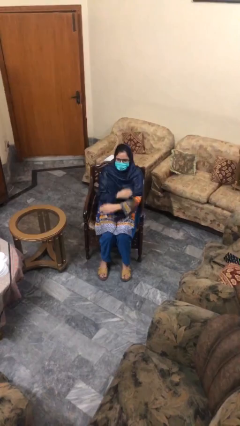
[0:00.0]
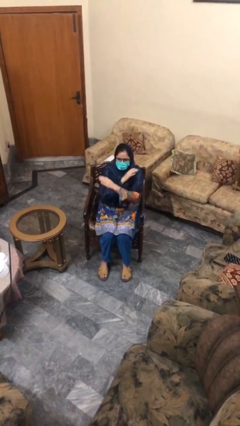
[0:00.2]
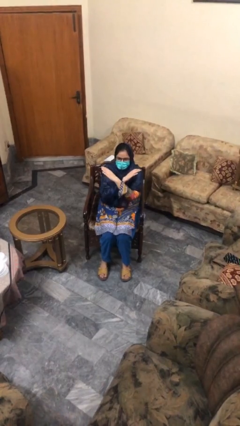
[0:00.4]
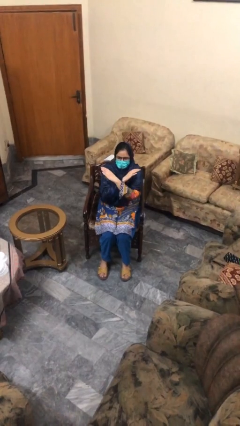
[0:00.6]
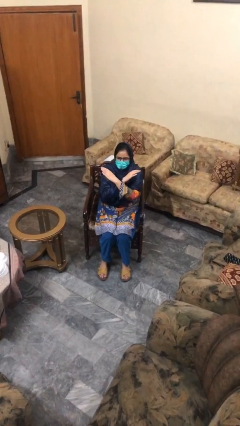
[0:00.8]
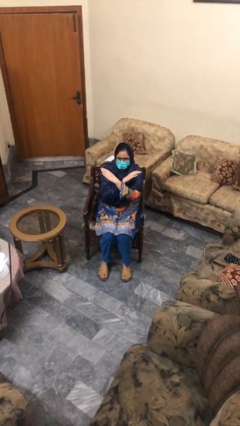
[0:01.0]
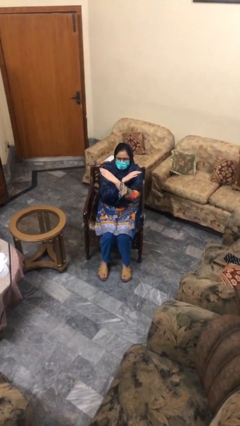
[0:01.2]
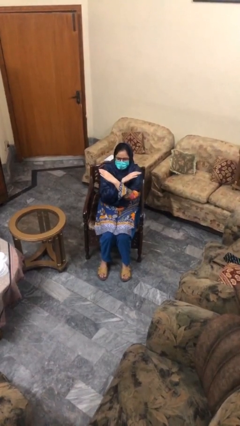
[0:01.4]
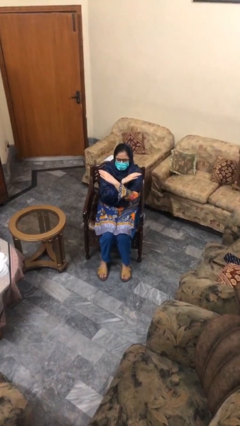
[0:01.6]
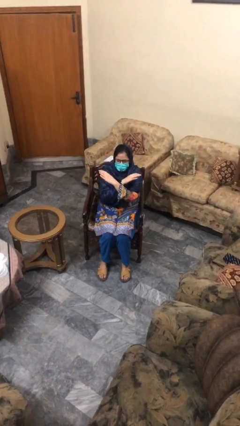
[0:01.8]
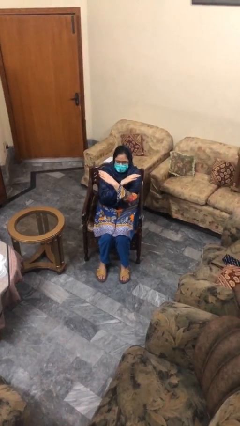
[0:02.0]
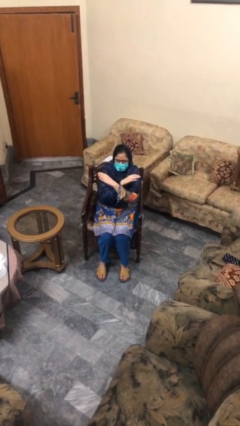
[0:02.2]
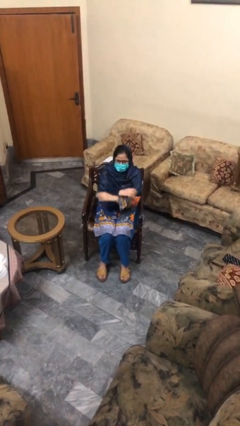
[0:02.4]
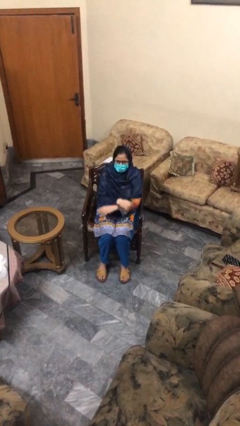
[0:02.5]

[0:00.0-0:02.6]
person gestures arms x

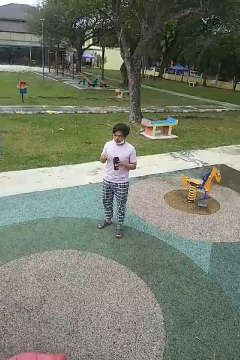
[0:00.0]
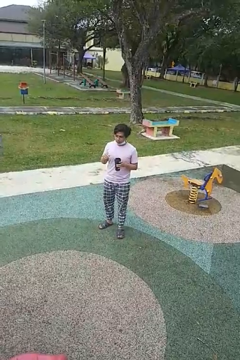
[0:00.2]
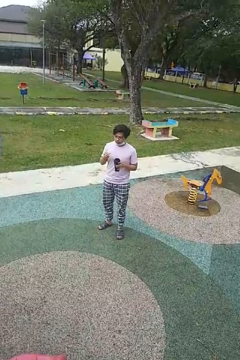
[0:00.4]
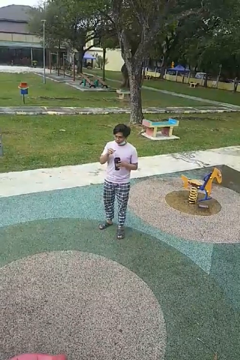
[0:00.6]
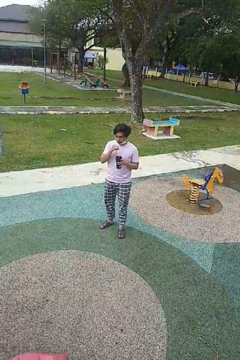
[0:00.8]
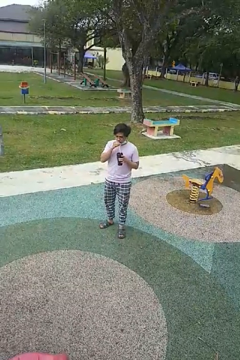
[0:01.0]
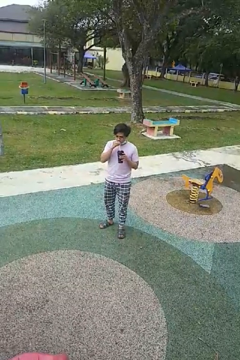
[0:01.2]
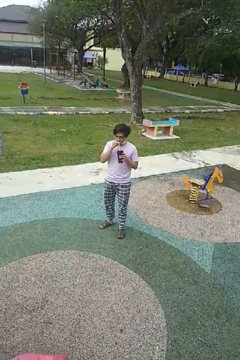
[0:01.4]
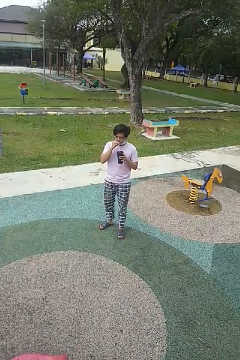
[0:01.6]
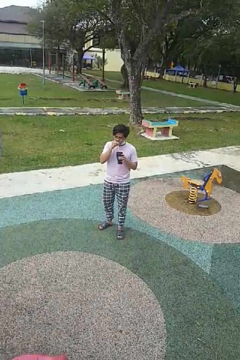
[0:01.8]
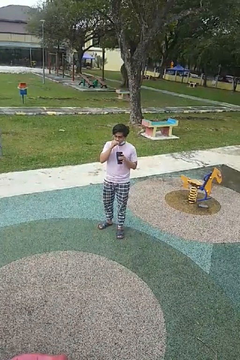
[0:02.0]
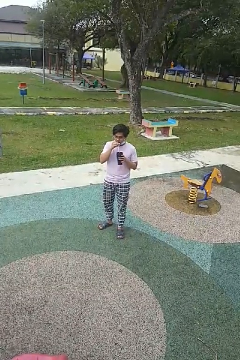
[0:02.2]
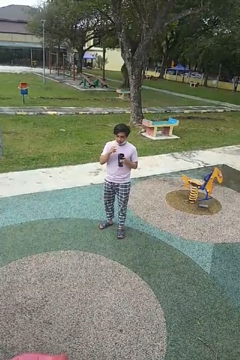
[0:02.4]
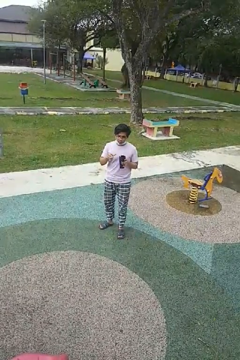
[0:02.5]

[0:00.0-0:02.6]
person drinks from straw

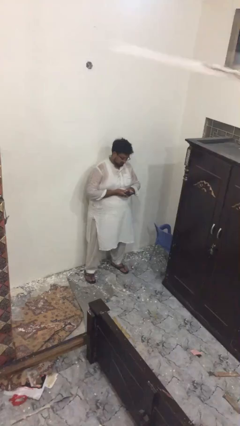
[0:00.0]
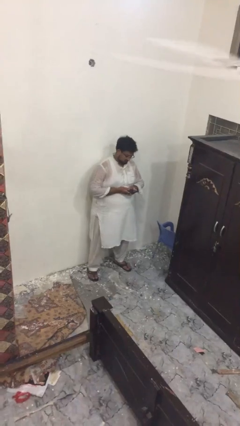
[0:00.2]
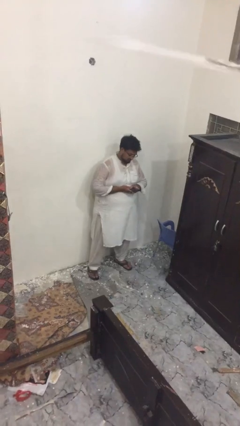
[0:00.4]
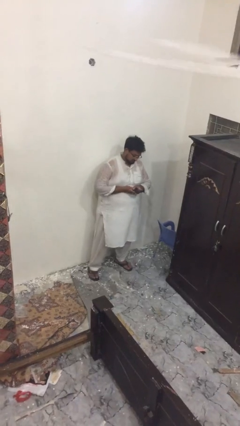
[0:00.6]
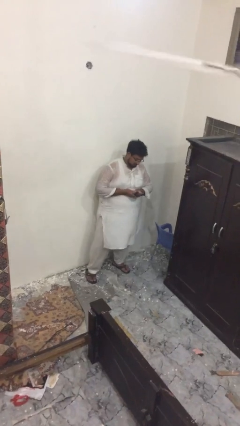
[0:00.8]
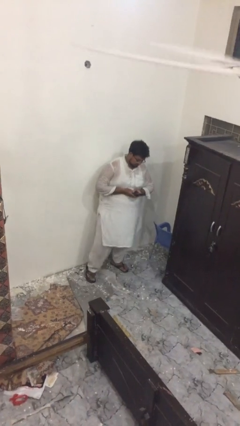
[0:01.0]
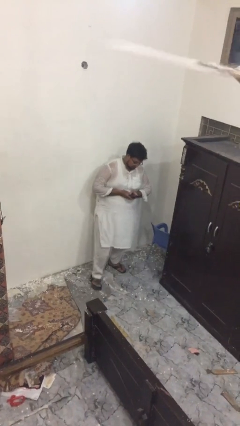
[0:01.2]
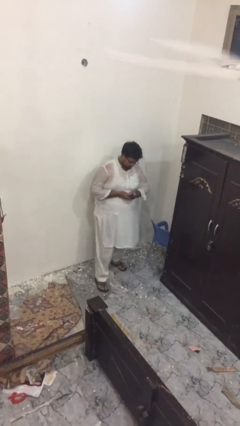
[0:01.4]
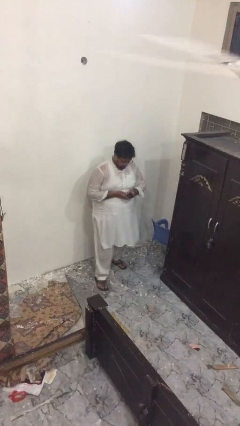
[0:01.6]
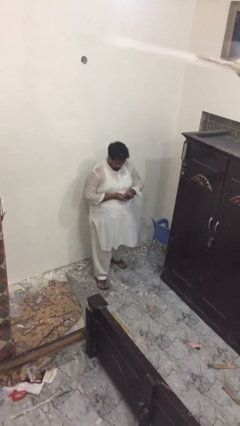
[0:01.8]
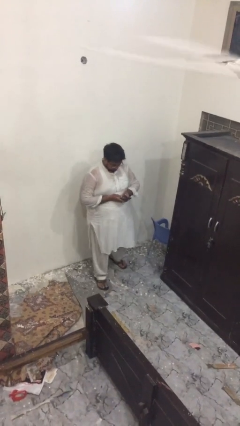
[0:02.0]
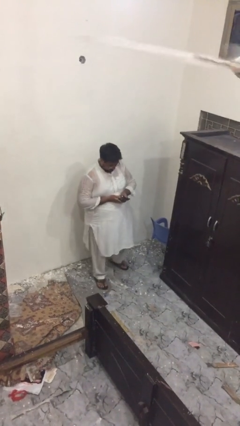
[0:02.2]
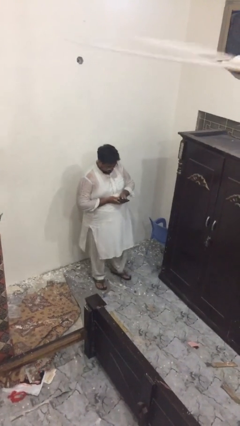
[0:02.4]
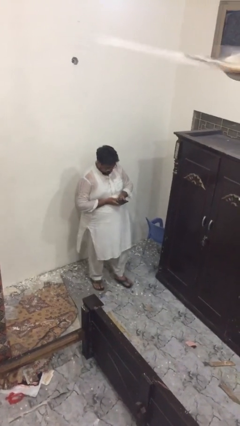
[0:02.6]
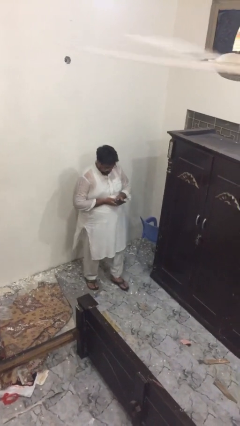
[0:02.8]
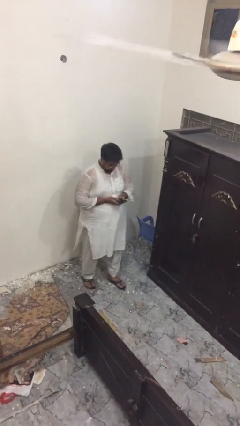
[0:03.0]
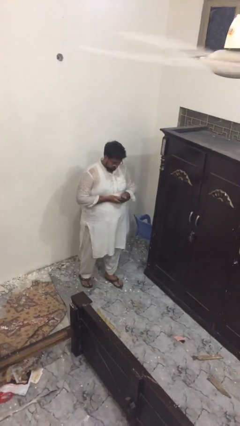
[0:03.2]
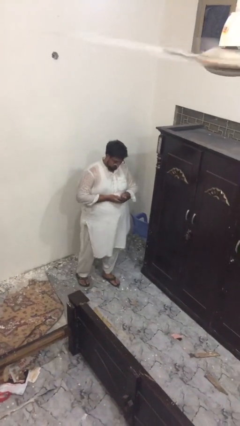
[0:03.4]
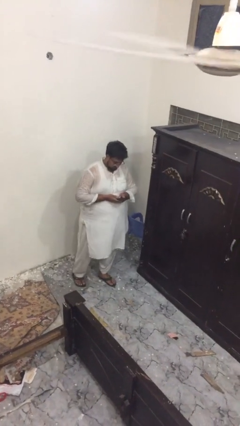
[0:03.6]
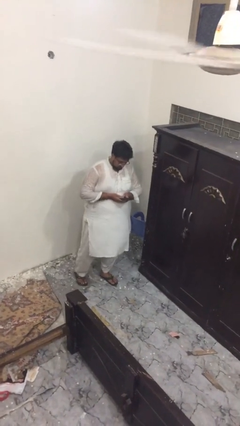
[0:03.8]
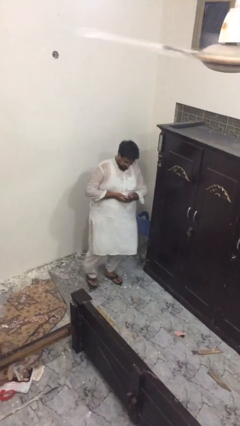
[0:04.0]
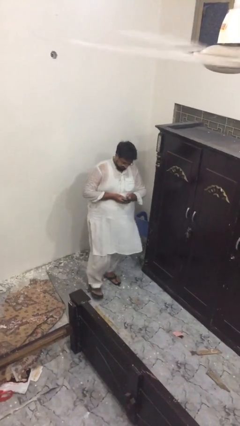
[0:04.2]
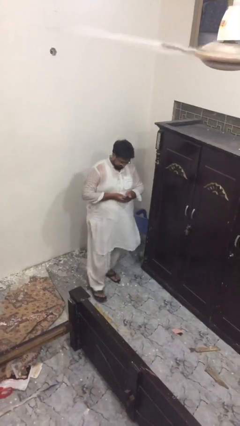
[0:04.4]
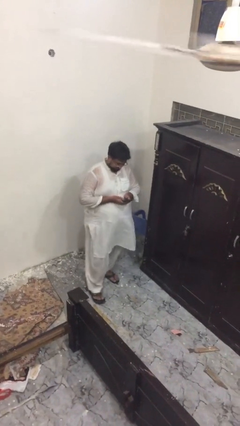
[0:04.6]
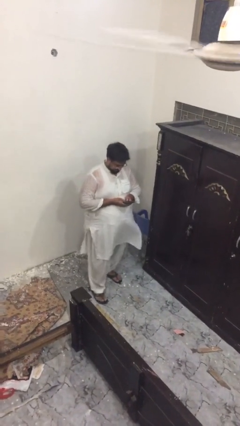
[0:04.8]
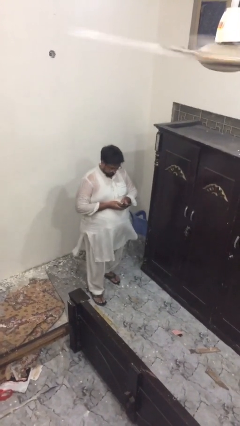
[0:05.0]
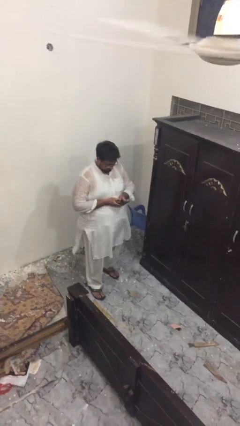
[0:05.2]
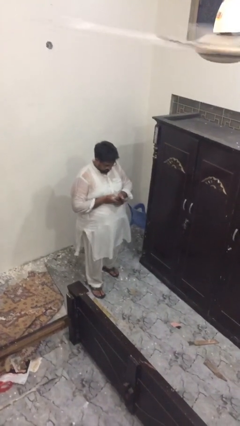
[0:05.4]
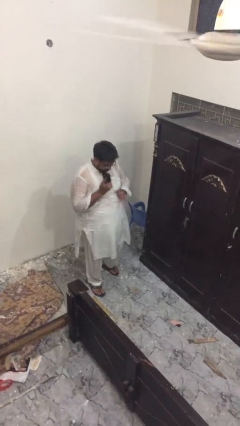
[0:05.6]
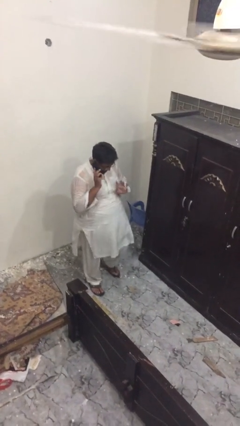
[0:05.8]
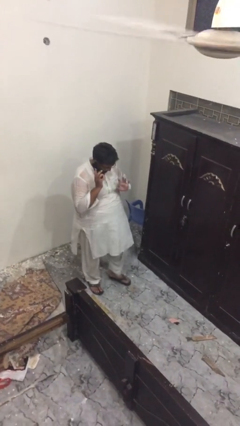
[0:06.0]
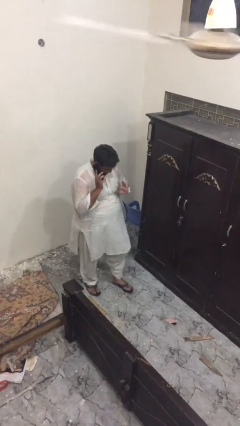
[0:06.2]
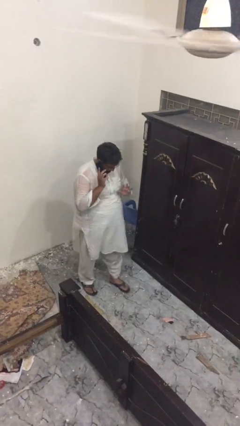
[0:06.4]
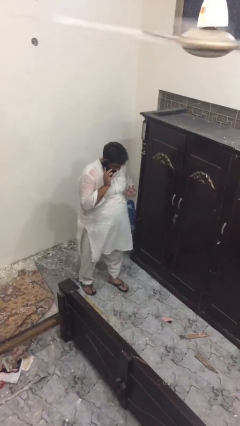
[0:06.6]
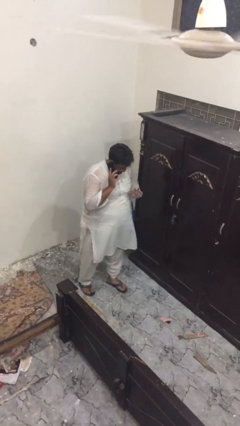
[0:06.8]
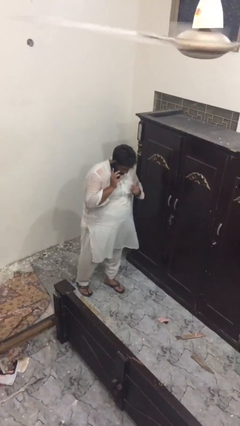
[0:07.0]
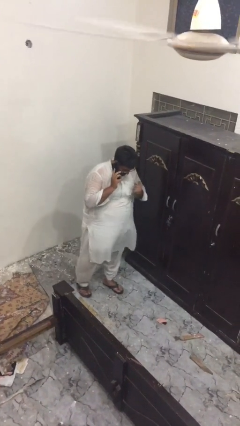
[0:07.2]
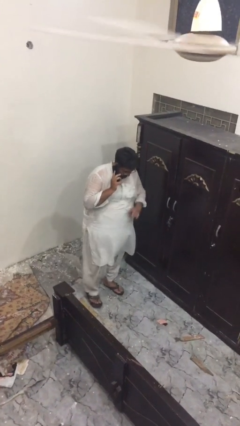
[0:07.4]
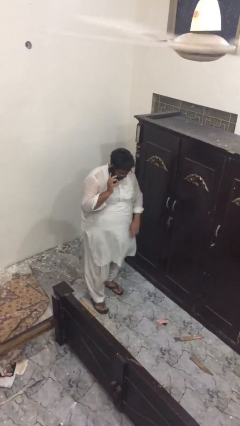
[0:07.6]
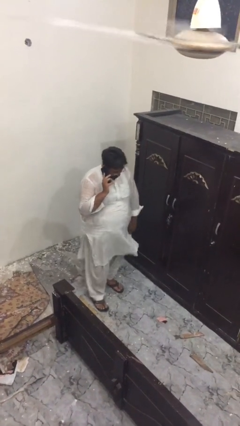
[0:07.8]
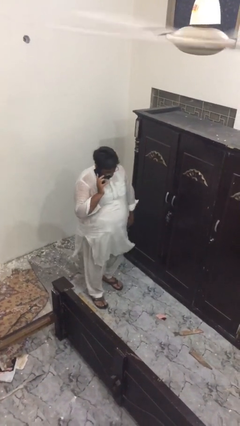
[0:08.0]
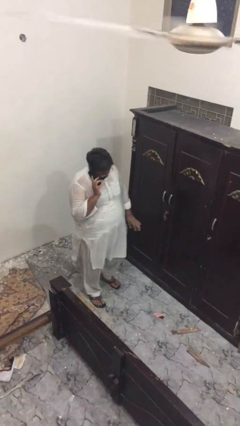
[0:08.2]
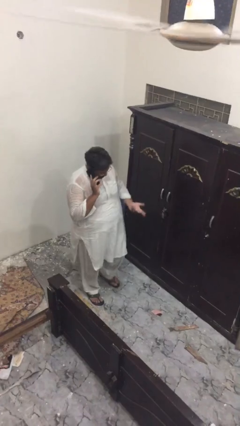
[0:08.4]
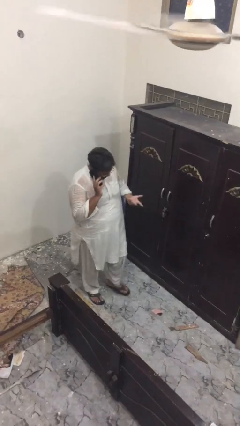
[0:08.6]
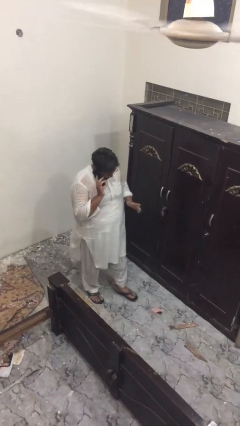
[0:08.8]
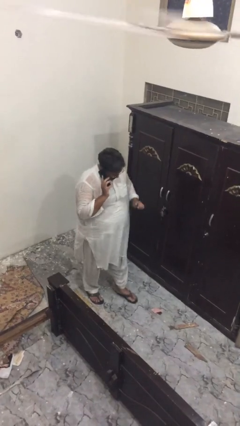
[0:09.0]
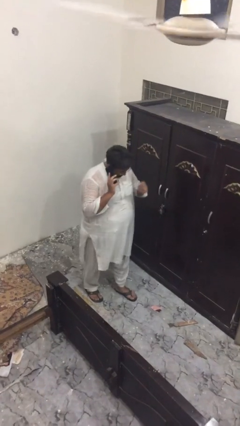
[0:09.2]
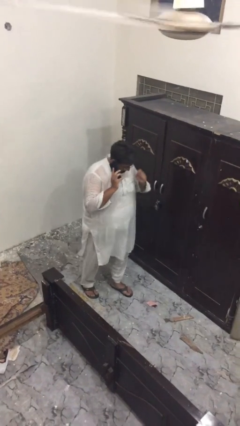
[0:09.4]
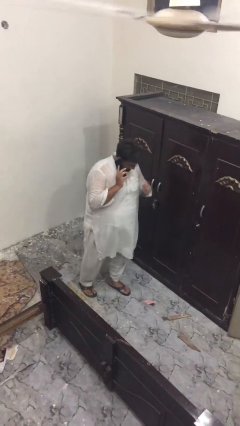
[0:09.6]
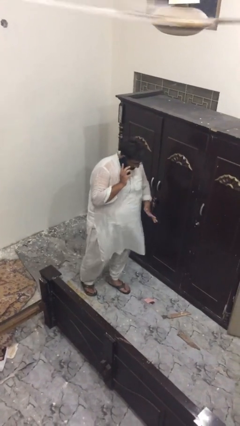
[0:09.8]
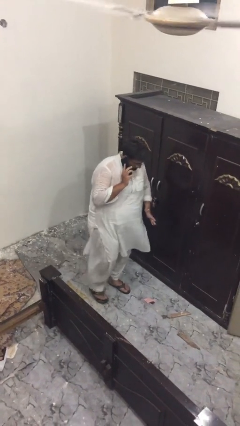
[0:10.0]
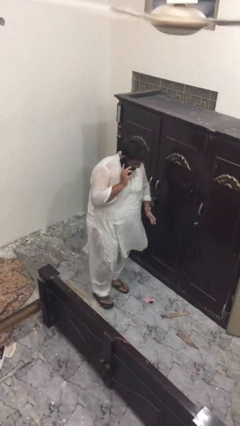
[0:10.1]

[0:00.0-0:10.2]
person texts on phone

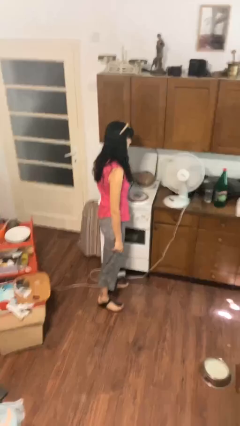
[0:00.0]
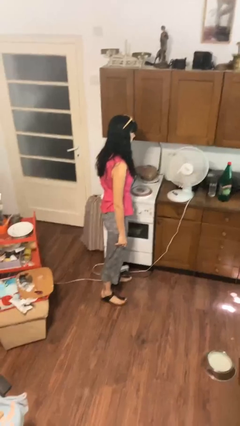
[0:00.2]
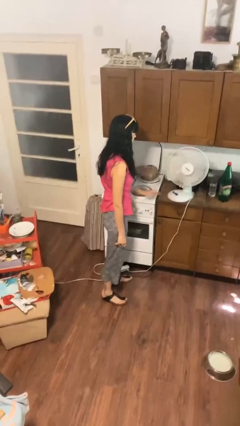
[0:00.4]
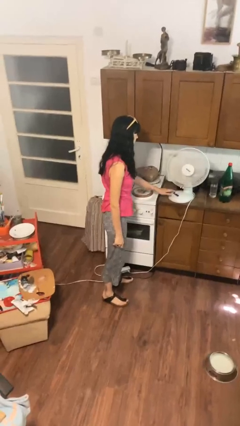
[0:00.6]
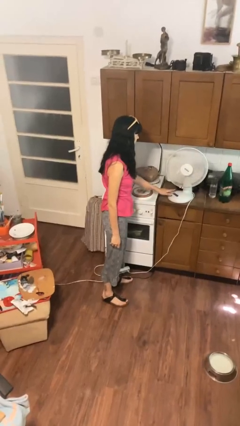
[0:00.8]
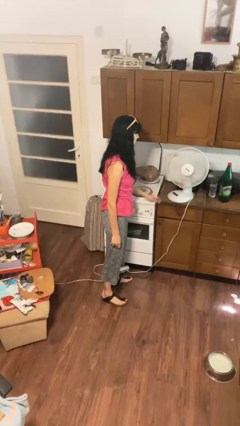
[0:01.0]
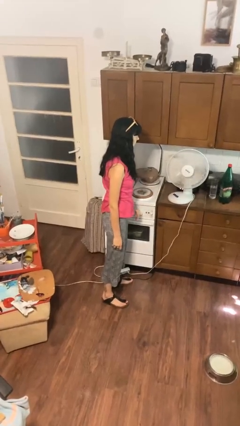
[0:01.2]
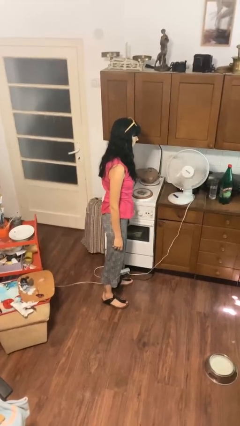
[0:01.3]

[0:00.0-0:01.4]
person turns off fan

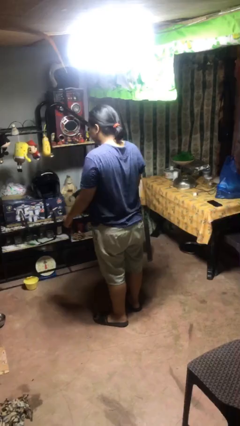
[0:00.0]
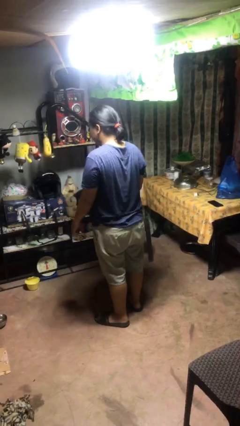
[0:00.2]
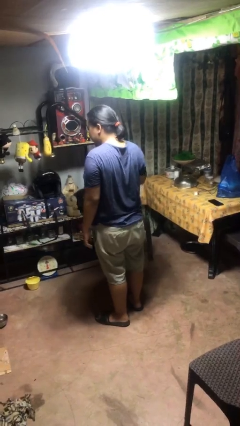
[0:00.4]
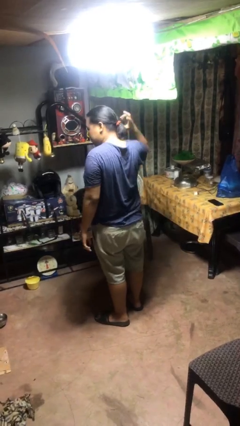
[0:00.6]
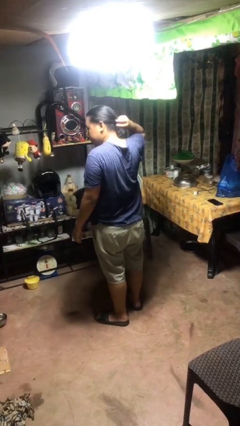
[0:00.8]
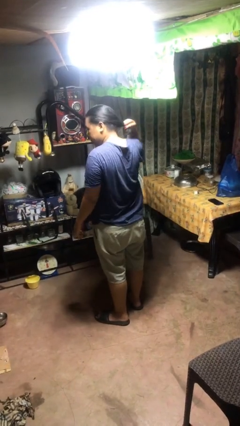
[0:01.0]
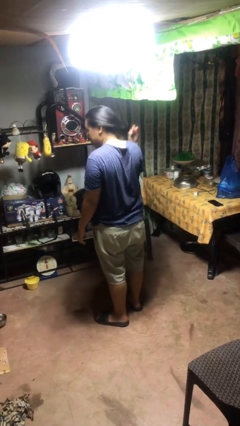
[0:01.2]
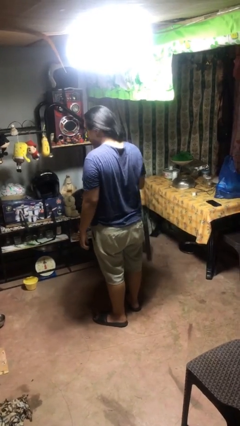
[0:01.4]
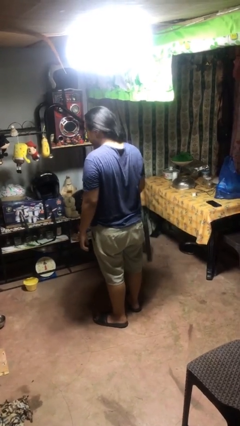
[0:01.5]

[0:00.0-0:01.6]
person takes off hairtie
